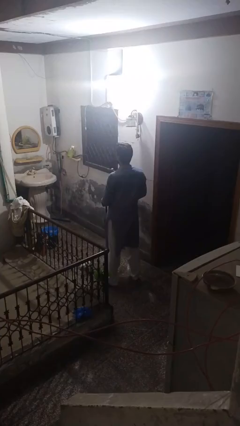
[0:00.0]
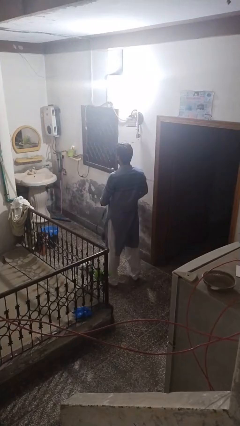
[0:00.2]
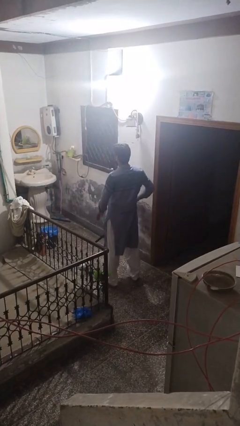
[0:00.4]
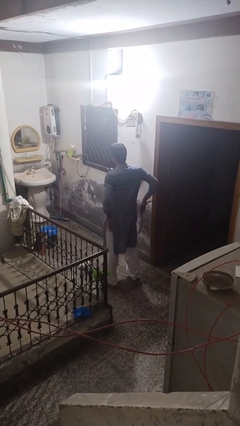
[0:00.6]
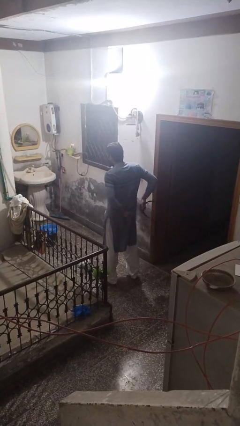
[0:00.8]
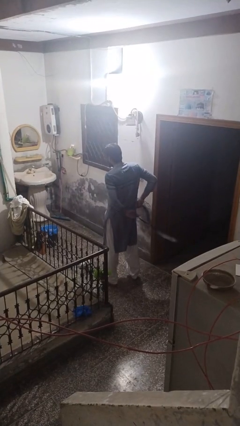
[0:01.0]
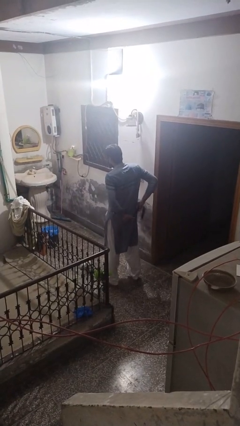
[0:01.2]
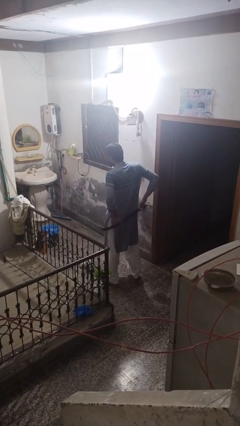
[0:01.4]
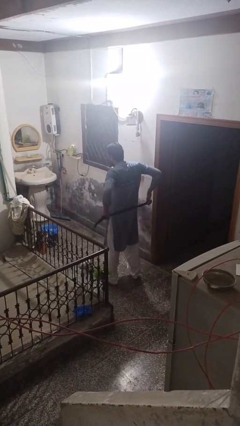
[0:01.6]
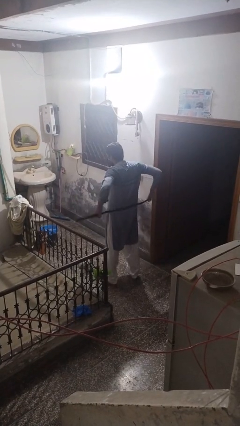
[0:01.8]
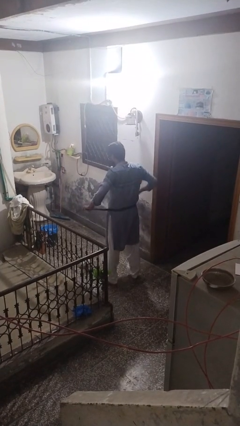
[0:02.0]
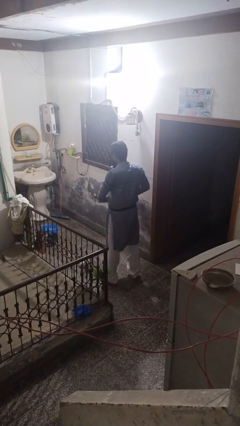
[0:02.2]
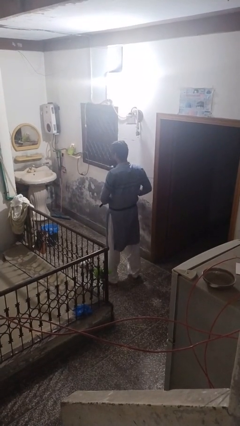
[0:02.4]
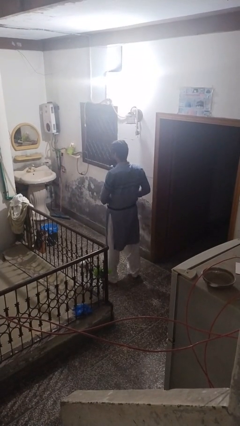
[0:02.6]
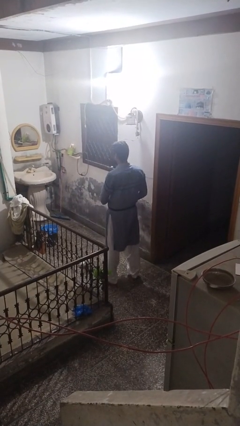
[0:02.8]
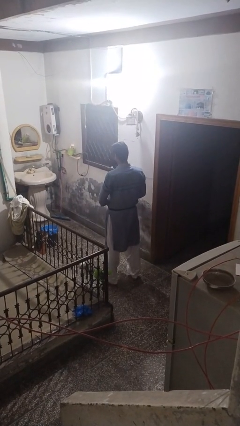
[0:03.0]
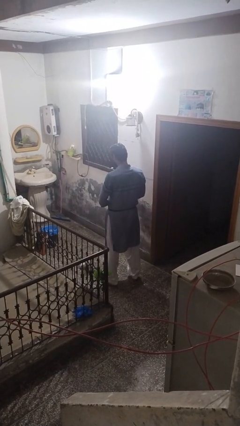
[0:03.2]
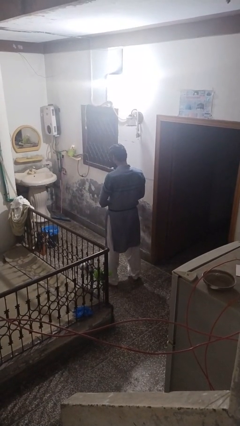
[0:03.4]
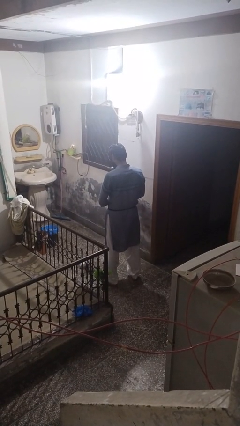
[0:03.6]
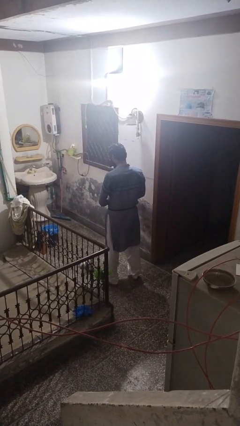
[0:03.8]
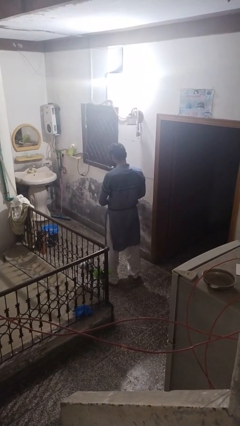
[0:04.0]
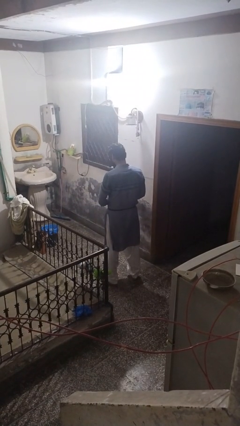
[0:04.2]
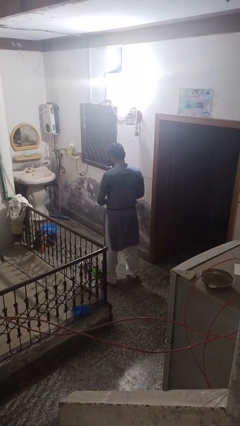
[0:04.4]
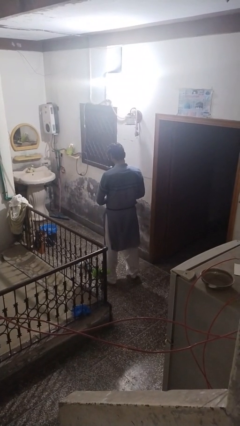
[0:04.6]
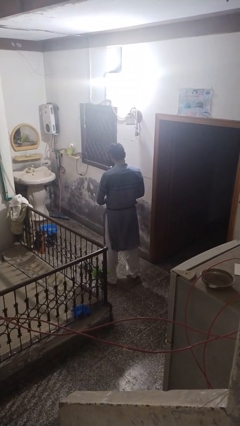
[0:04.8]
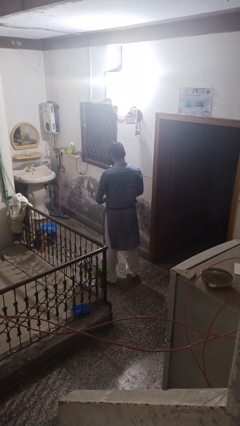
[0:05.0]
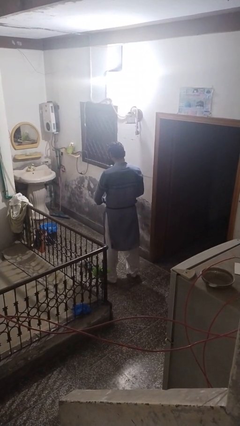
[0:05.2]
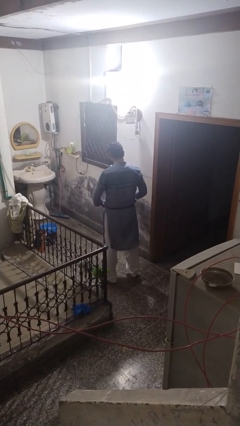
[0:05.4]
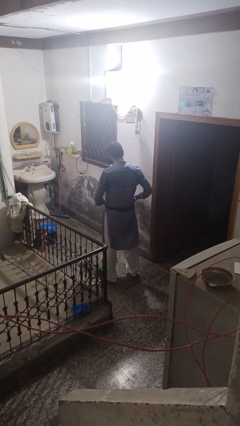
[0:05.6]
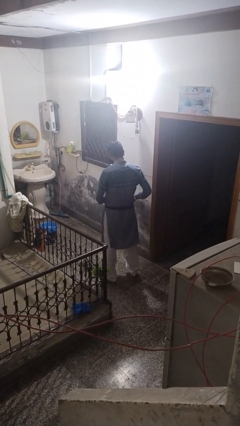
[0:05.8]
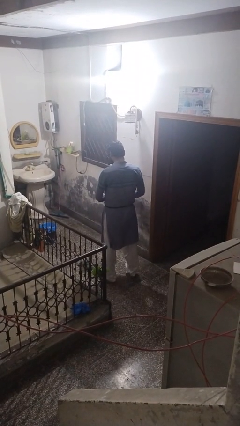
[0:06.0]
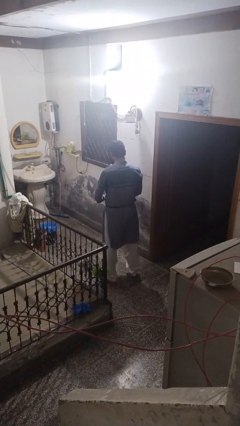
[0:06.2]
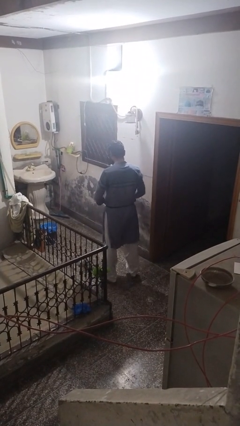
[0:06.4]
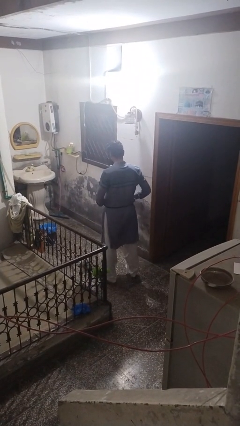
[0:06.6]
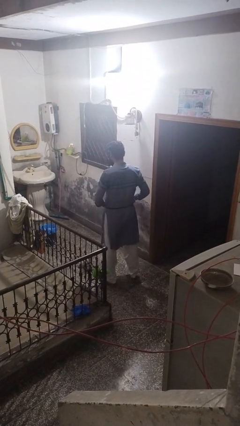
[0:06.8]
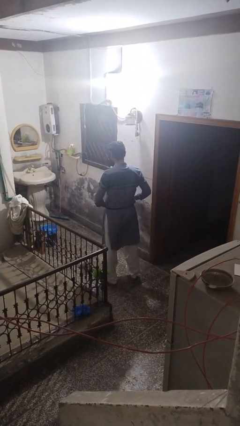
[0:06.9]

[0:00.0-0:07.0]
person puts on belt

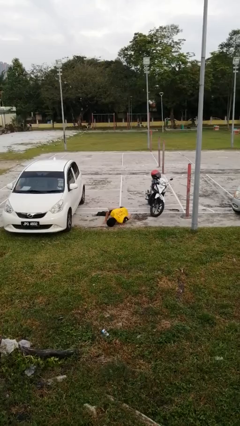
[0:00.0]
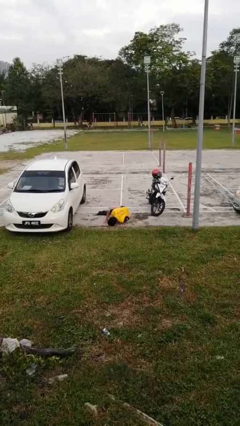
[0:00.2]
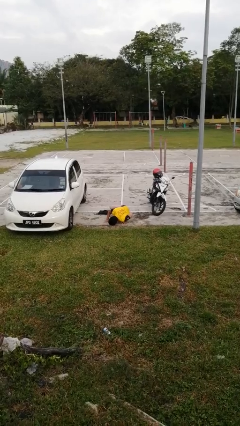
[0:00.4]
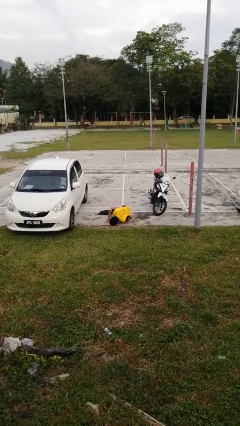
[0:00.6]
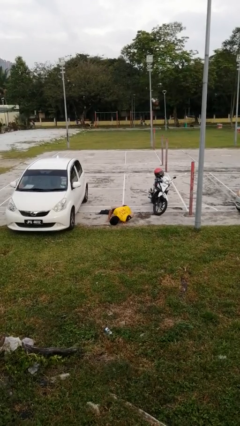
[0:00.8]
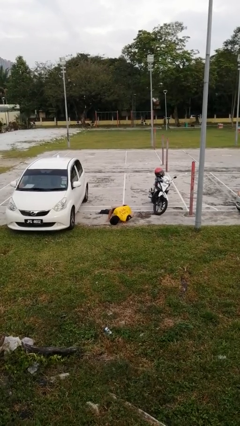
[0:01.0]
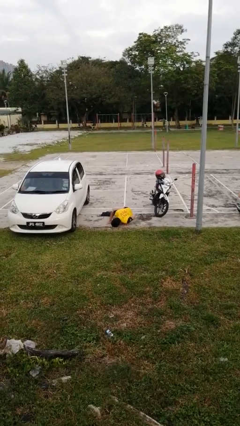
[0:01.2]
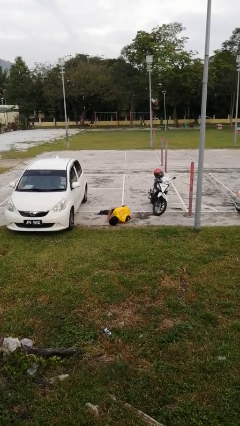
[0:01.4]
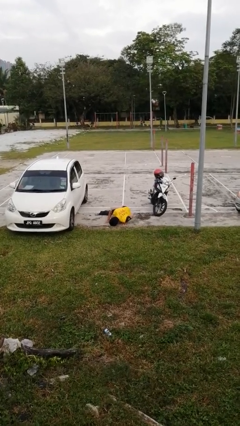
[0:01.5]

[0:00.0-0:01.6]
person lies down on floor

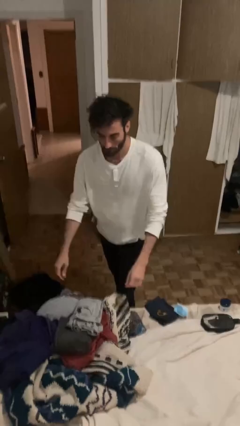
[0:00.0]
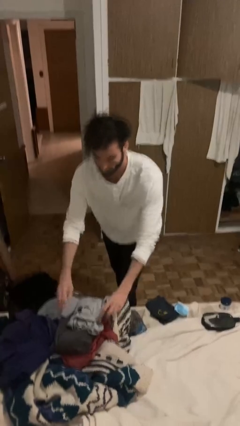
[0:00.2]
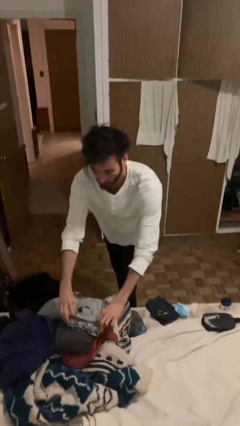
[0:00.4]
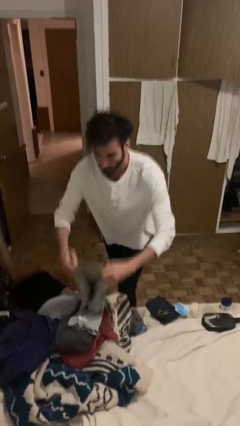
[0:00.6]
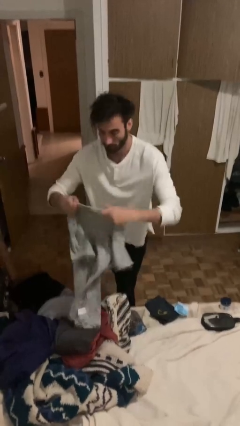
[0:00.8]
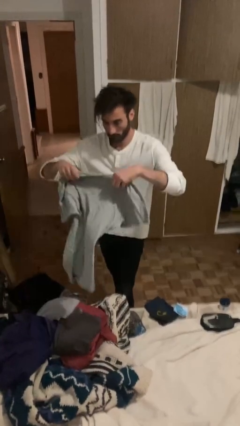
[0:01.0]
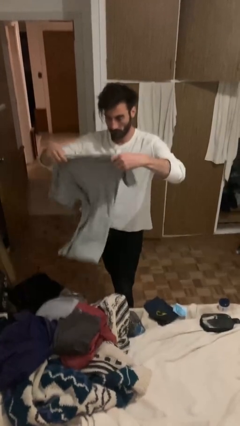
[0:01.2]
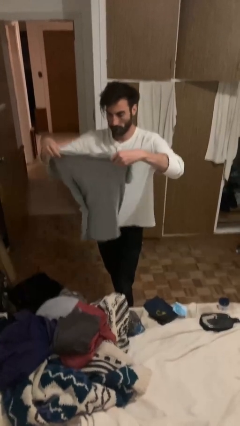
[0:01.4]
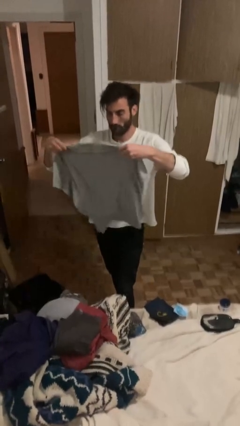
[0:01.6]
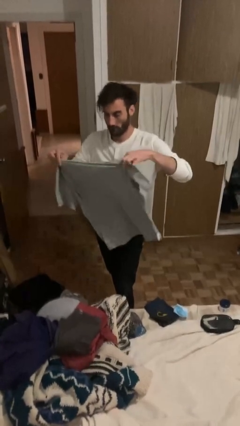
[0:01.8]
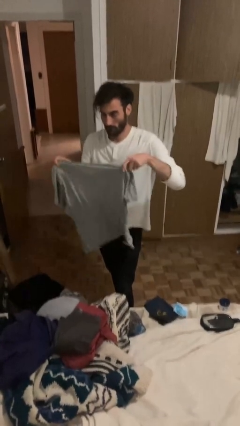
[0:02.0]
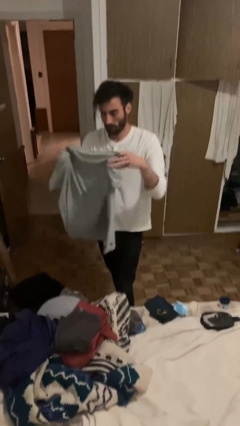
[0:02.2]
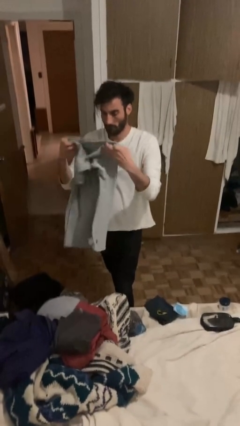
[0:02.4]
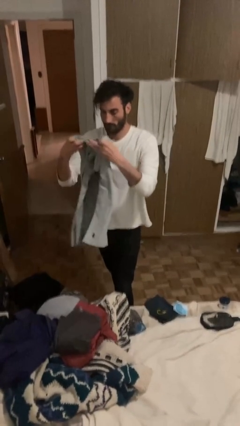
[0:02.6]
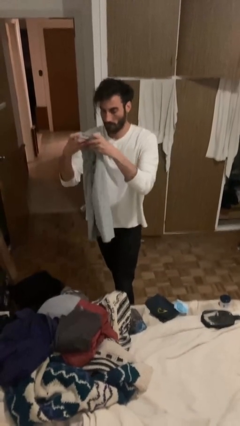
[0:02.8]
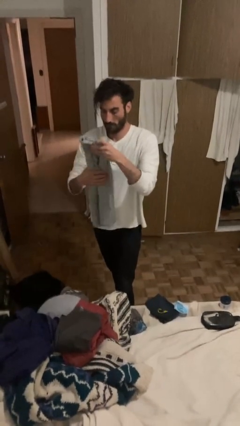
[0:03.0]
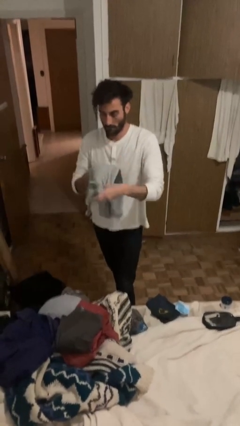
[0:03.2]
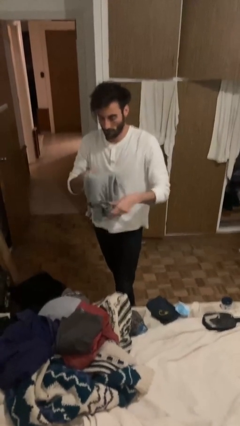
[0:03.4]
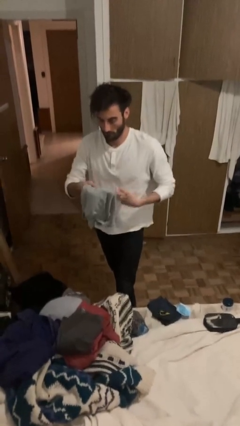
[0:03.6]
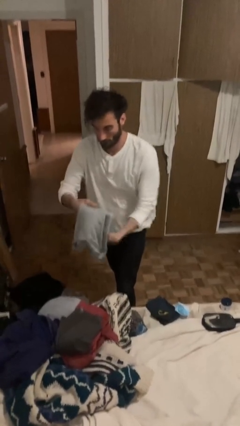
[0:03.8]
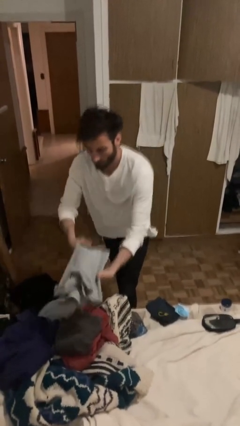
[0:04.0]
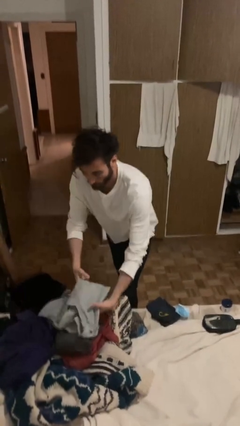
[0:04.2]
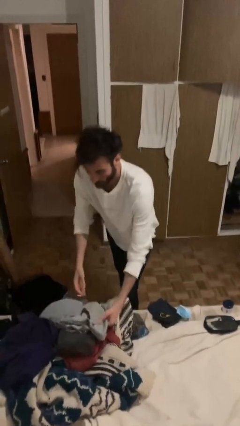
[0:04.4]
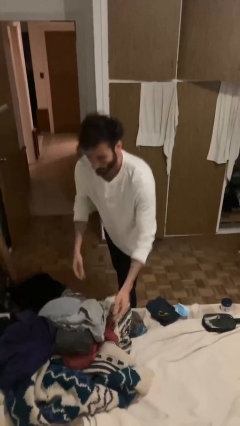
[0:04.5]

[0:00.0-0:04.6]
person folds shirt

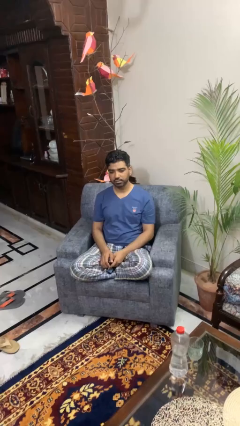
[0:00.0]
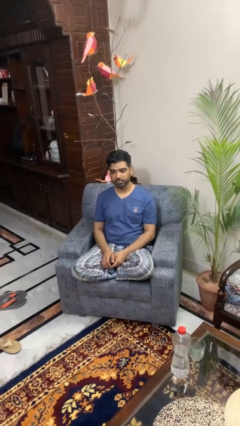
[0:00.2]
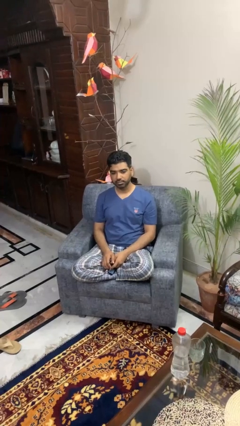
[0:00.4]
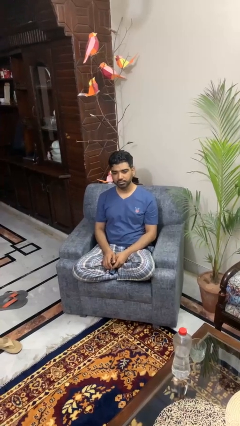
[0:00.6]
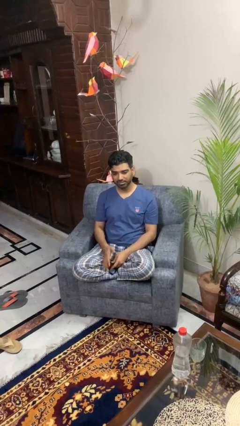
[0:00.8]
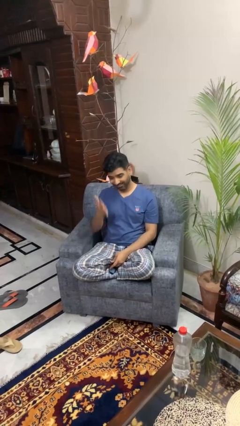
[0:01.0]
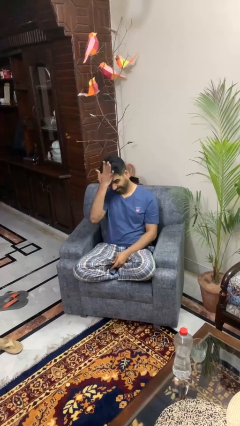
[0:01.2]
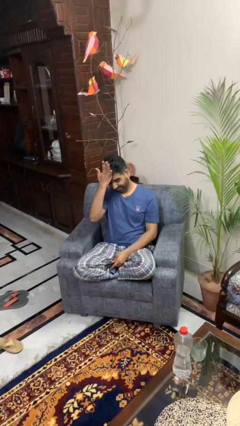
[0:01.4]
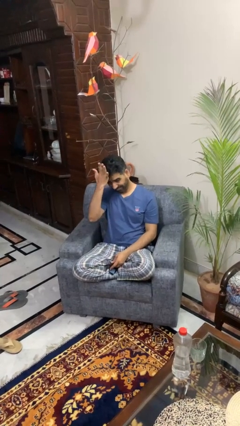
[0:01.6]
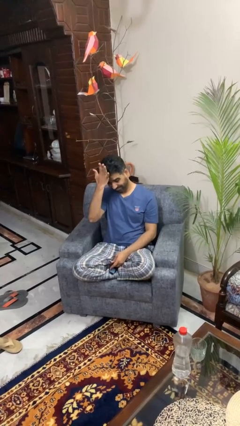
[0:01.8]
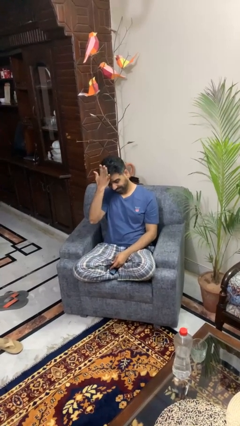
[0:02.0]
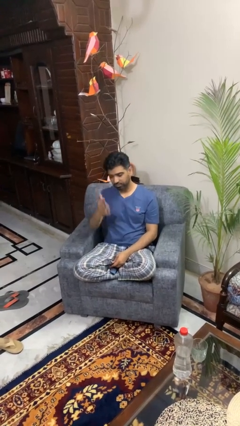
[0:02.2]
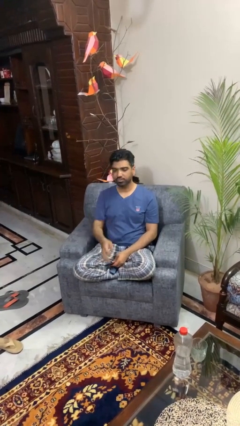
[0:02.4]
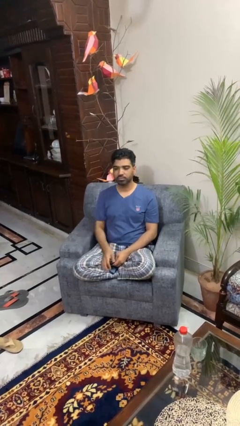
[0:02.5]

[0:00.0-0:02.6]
person pats head

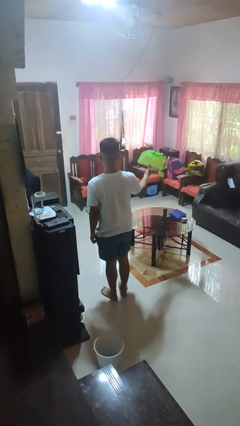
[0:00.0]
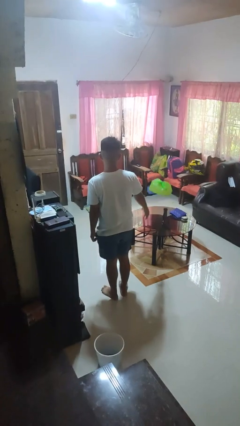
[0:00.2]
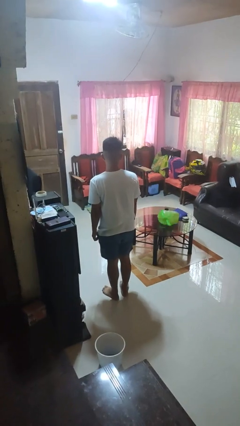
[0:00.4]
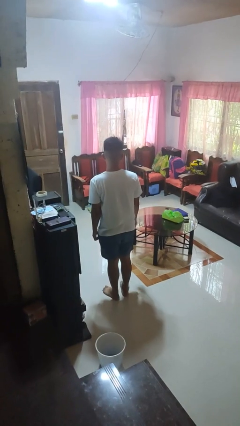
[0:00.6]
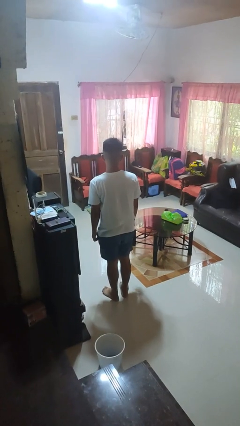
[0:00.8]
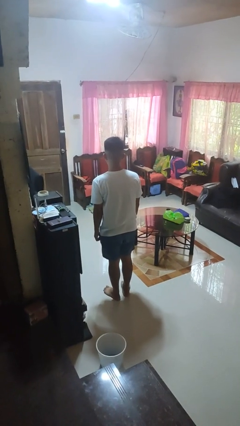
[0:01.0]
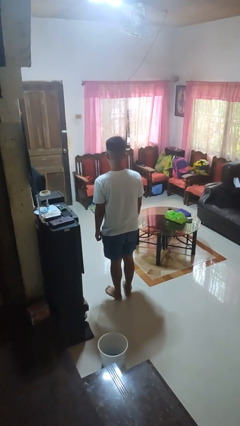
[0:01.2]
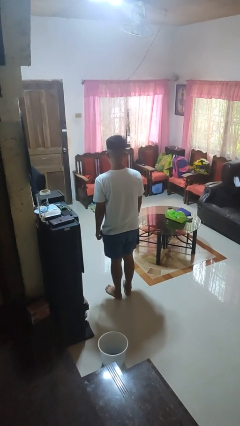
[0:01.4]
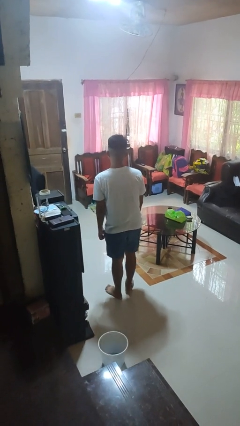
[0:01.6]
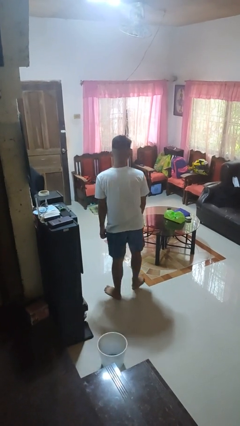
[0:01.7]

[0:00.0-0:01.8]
person throws object on table

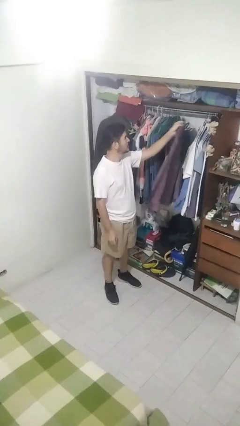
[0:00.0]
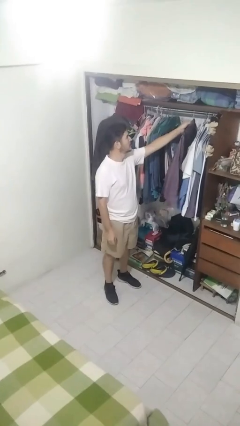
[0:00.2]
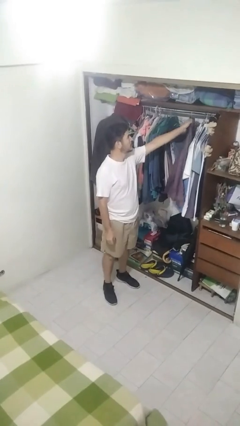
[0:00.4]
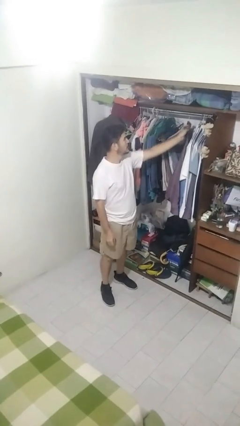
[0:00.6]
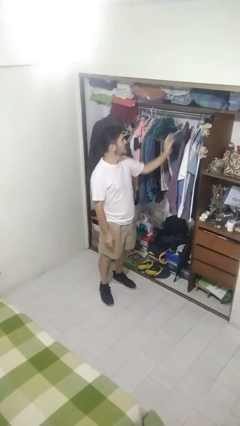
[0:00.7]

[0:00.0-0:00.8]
person puts clothes into closet
